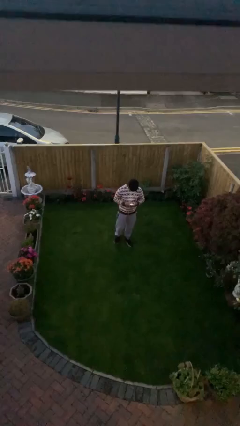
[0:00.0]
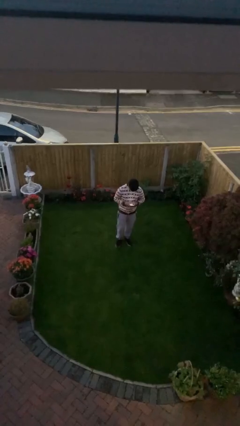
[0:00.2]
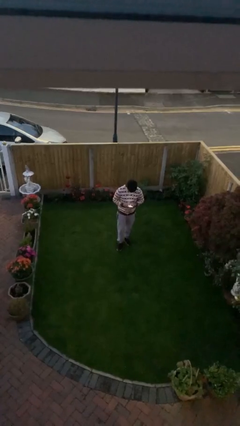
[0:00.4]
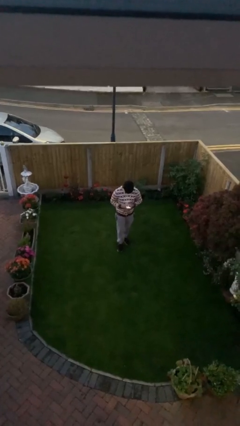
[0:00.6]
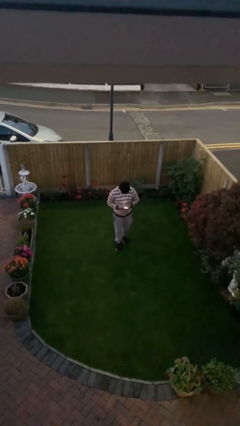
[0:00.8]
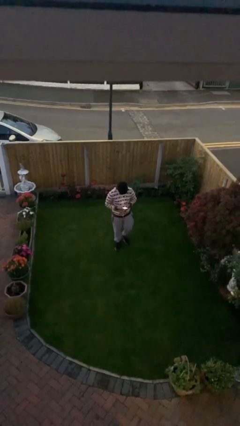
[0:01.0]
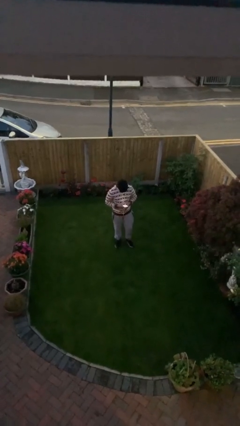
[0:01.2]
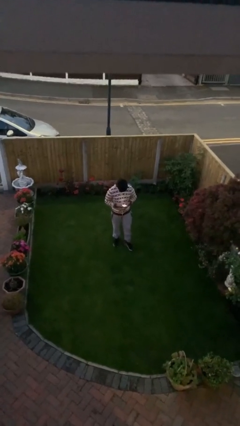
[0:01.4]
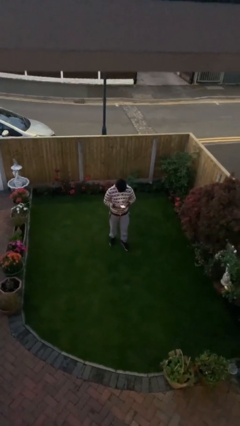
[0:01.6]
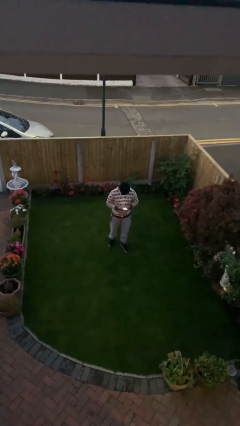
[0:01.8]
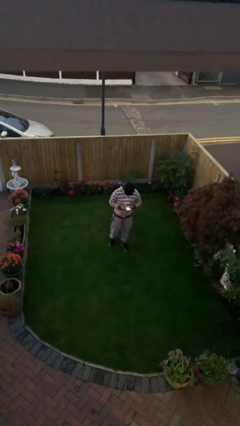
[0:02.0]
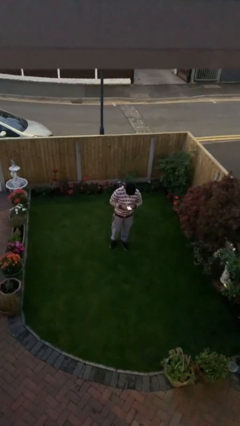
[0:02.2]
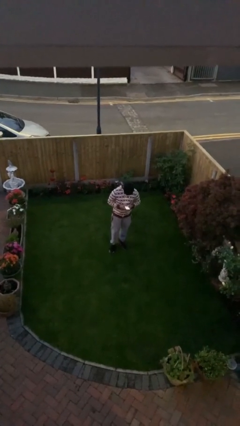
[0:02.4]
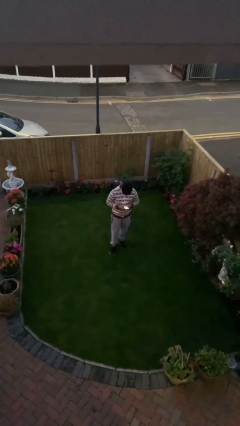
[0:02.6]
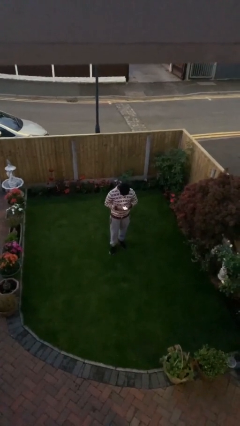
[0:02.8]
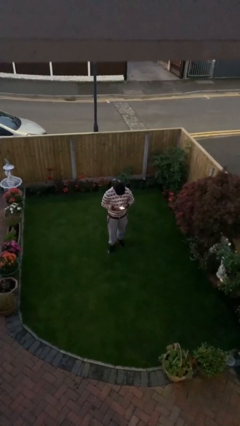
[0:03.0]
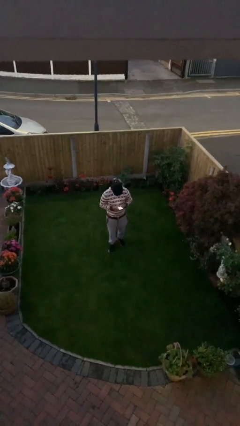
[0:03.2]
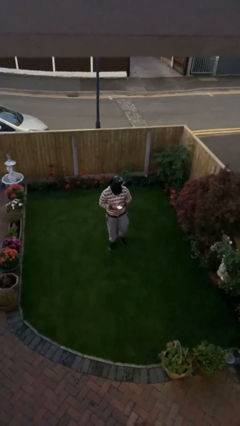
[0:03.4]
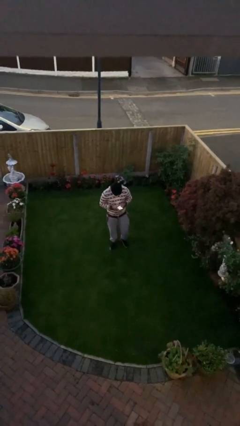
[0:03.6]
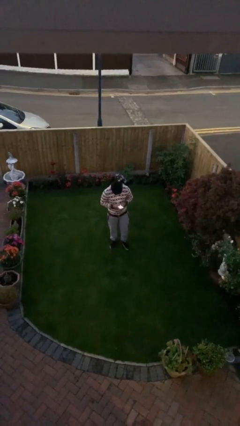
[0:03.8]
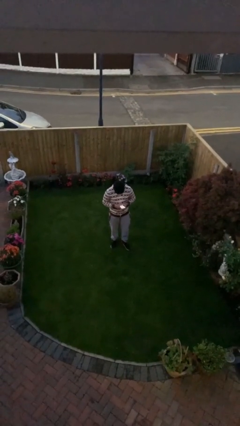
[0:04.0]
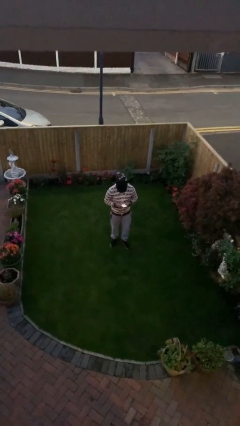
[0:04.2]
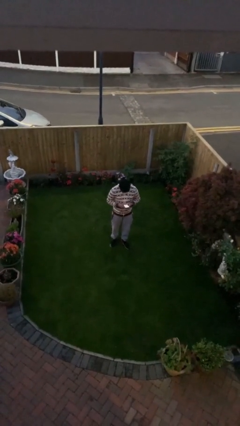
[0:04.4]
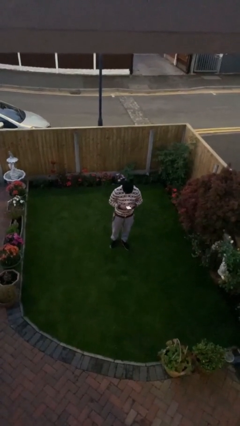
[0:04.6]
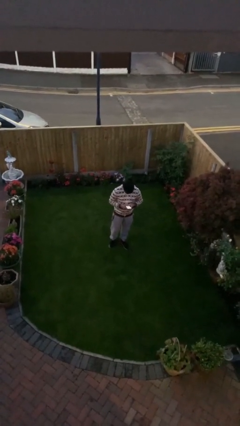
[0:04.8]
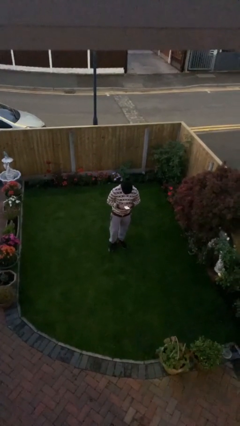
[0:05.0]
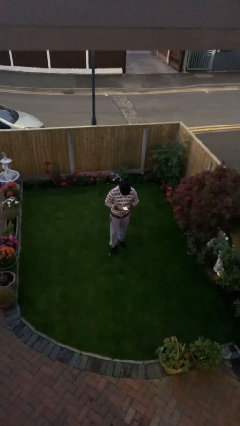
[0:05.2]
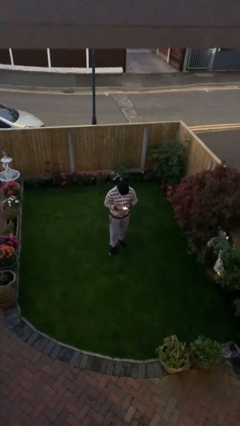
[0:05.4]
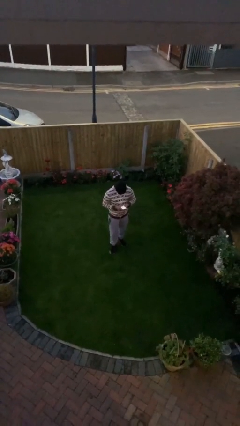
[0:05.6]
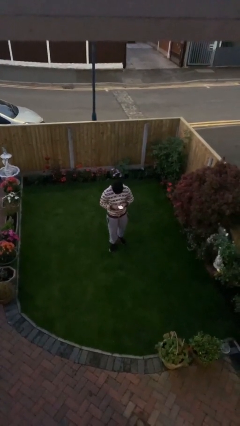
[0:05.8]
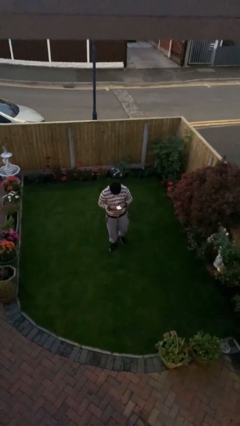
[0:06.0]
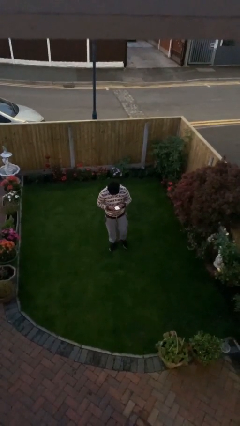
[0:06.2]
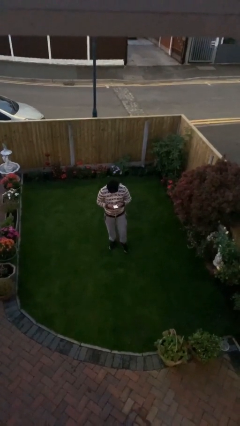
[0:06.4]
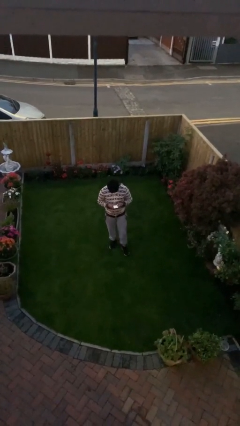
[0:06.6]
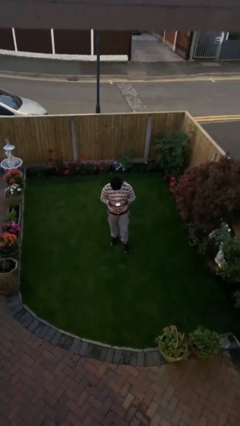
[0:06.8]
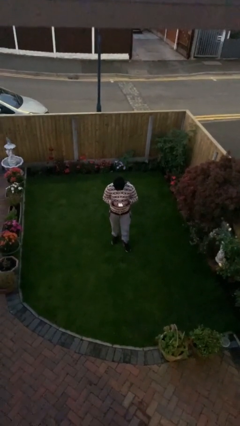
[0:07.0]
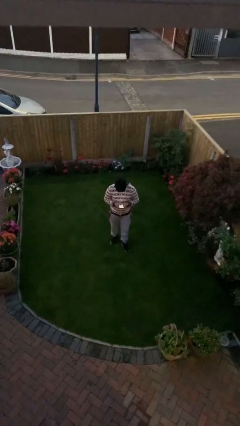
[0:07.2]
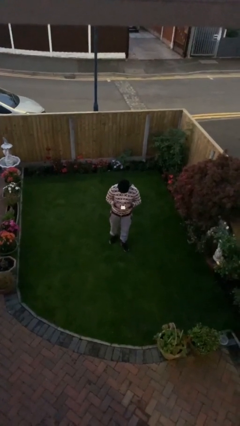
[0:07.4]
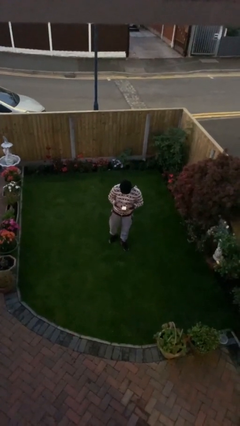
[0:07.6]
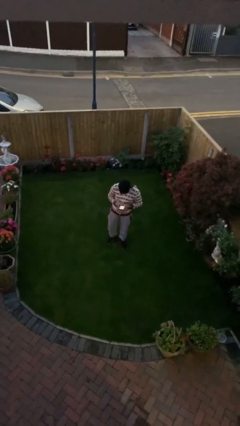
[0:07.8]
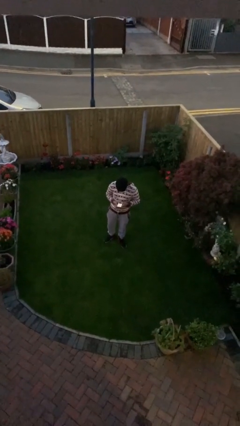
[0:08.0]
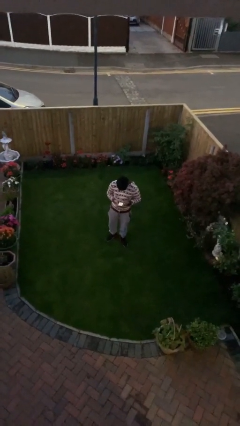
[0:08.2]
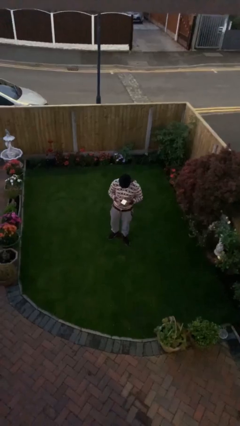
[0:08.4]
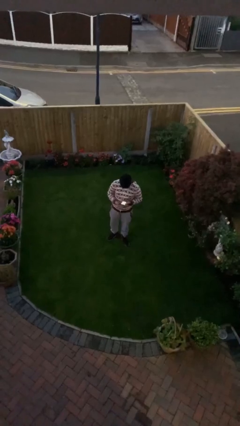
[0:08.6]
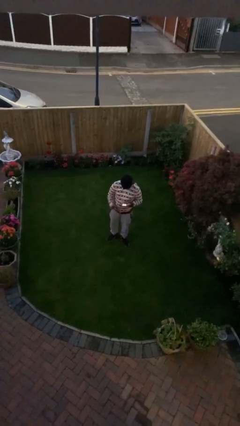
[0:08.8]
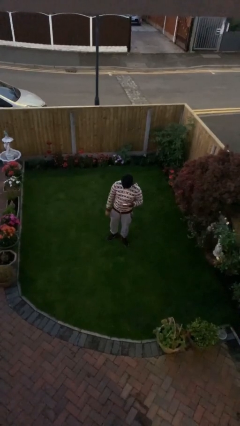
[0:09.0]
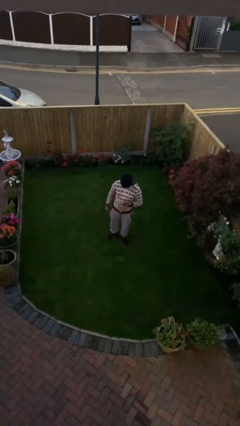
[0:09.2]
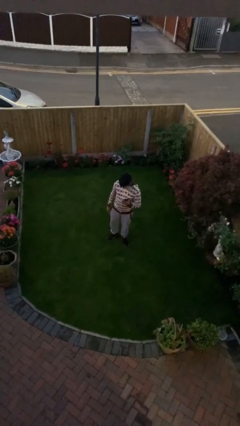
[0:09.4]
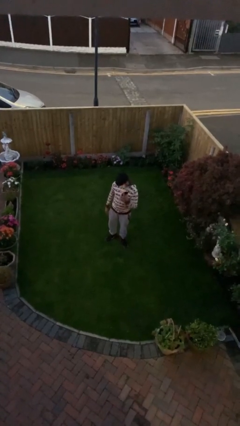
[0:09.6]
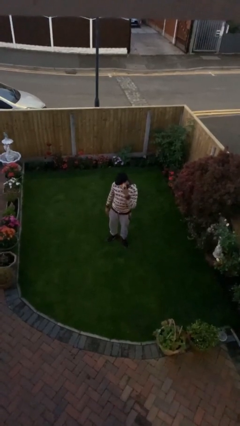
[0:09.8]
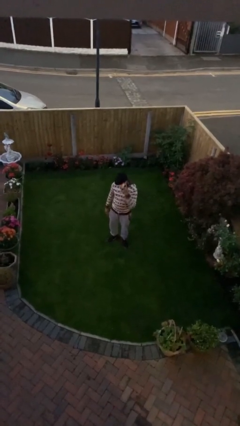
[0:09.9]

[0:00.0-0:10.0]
person texts on phone

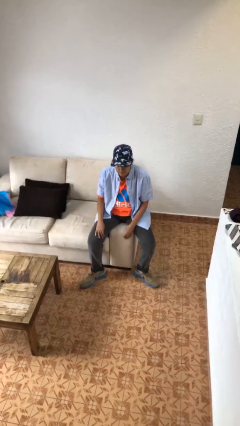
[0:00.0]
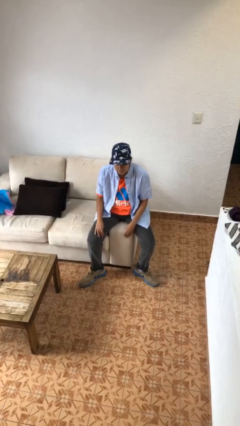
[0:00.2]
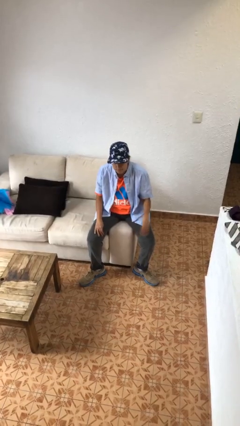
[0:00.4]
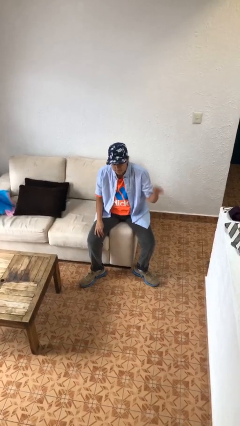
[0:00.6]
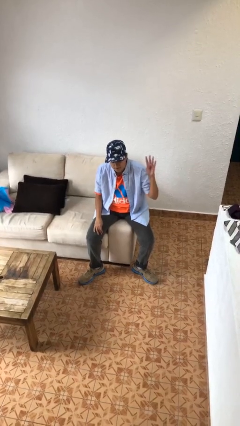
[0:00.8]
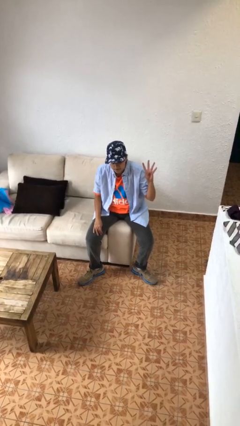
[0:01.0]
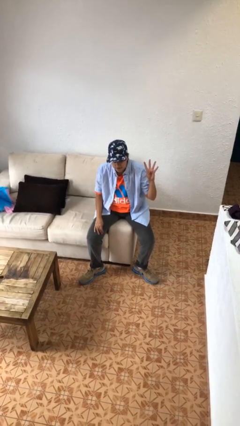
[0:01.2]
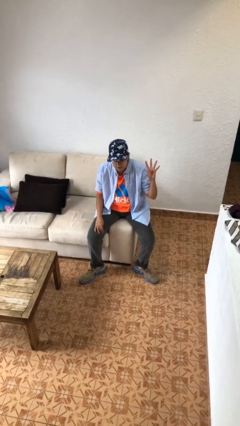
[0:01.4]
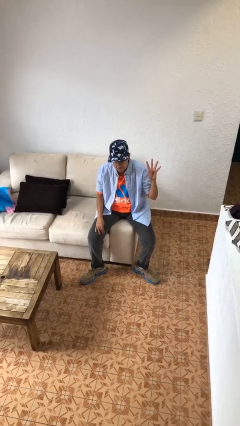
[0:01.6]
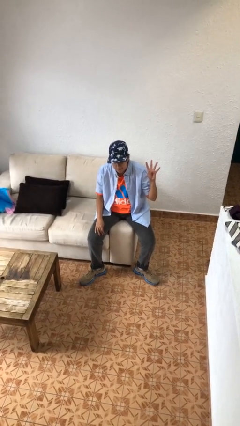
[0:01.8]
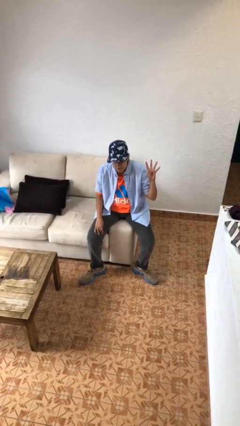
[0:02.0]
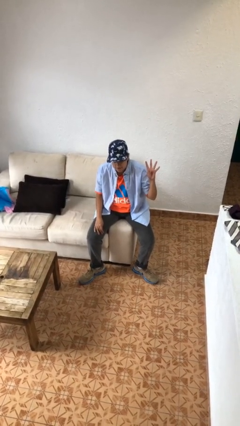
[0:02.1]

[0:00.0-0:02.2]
person gestures number four

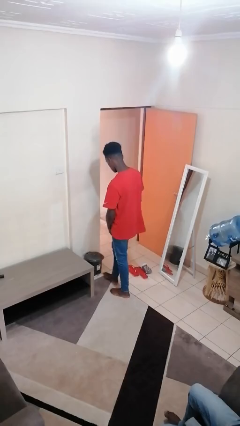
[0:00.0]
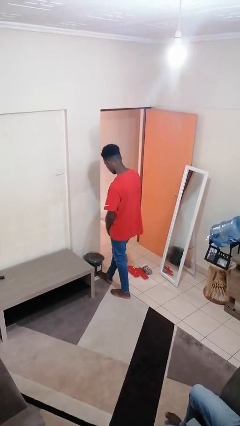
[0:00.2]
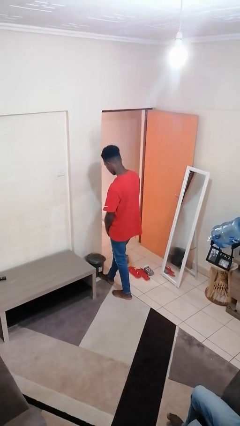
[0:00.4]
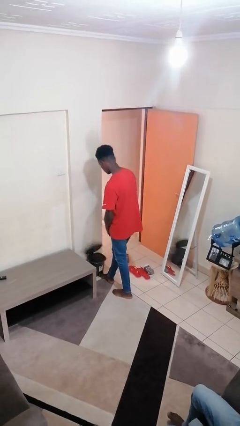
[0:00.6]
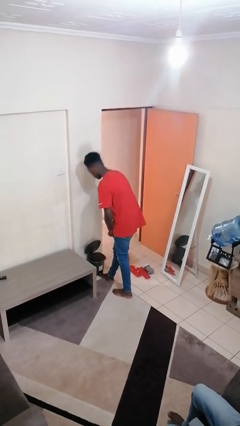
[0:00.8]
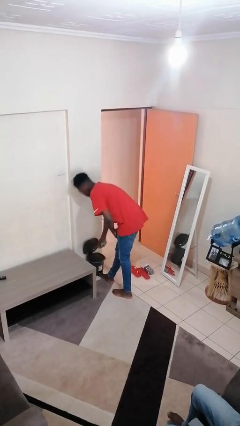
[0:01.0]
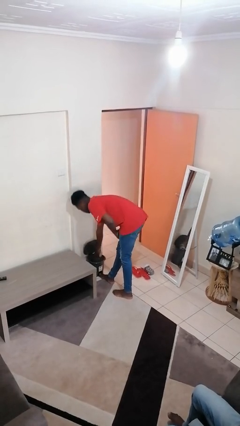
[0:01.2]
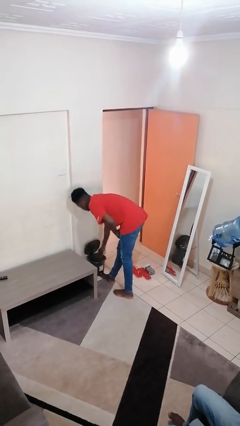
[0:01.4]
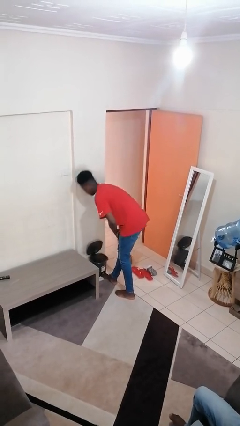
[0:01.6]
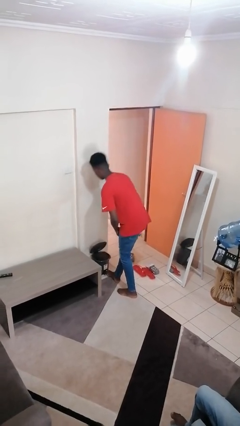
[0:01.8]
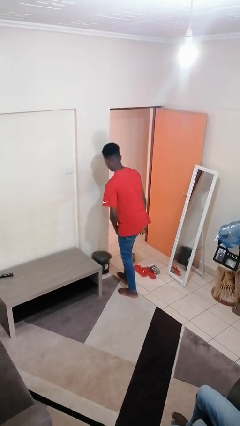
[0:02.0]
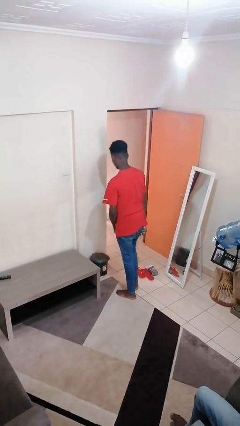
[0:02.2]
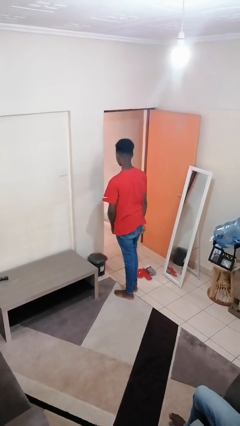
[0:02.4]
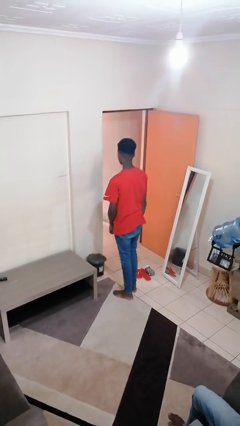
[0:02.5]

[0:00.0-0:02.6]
person discards trash

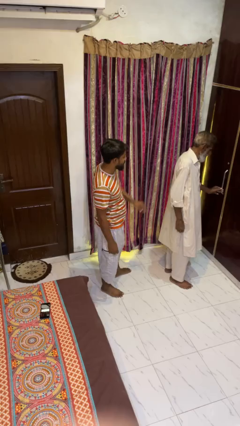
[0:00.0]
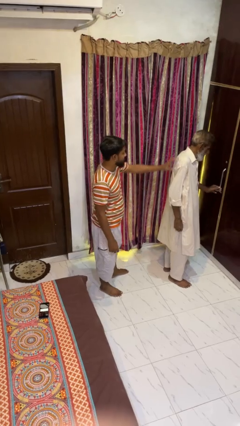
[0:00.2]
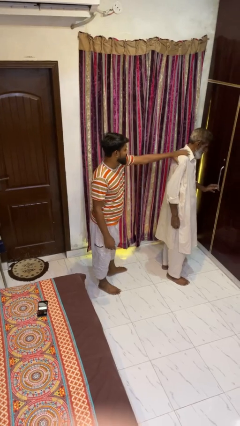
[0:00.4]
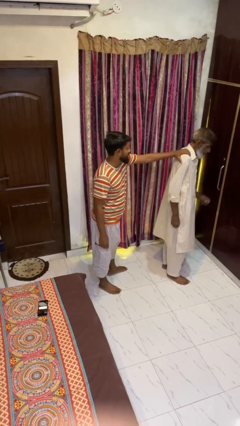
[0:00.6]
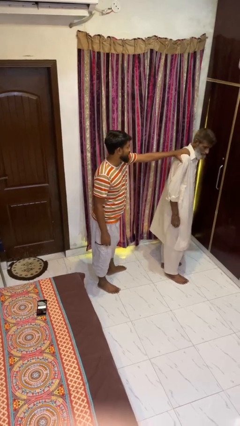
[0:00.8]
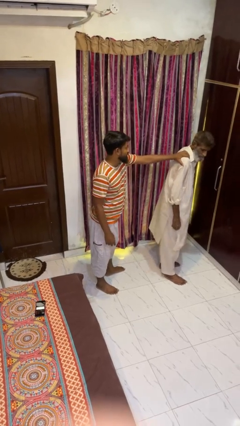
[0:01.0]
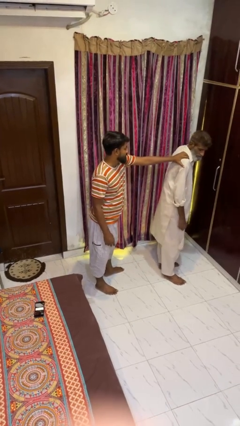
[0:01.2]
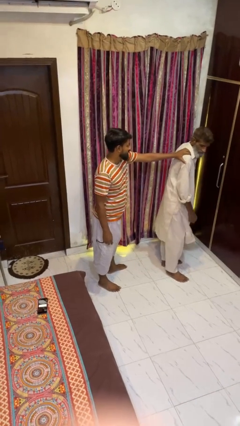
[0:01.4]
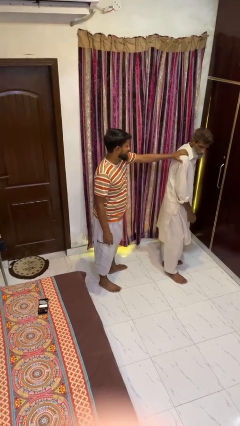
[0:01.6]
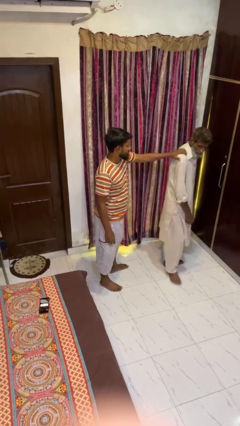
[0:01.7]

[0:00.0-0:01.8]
person grabs person by shoulder

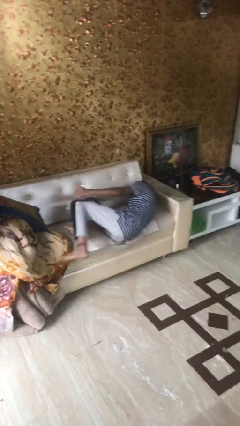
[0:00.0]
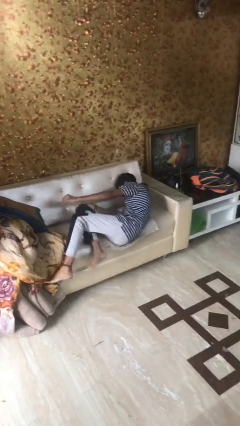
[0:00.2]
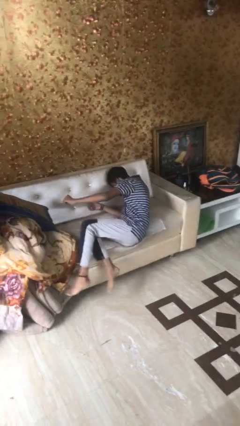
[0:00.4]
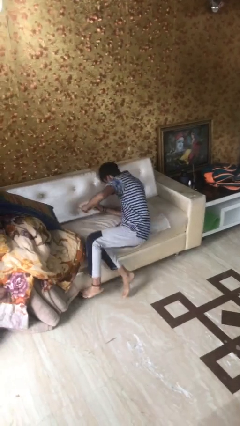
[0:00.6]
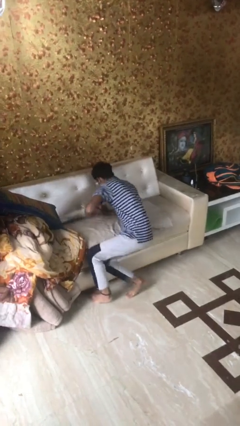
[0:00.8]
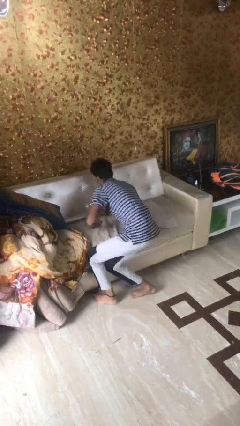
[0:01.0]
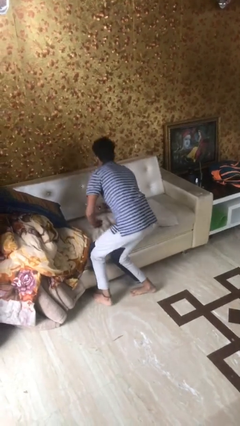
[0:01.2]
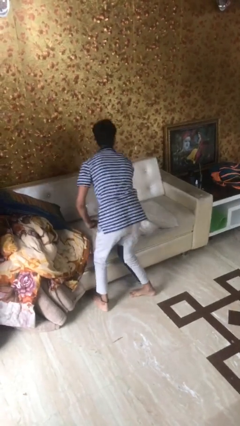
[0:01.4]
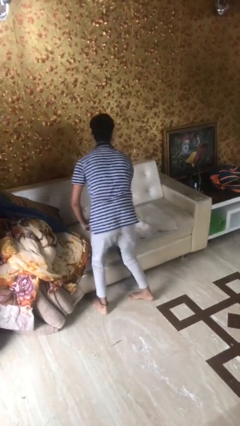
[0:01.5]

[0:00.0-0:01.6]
person stands up
